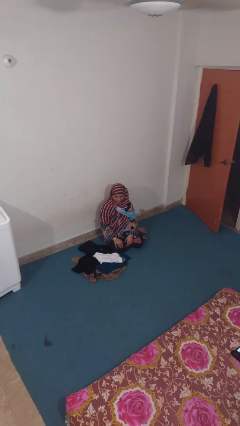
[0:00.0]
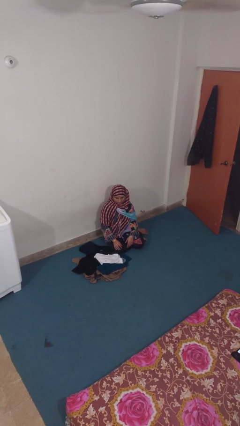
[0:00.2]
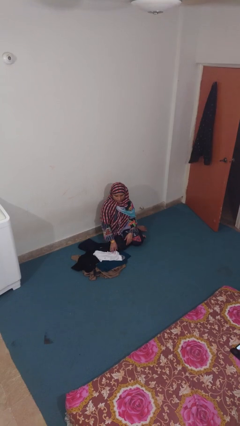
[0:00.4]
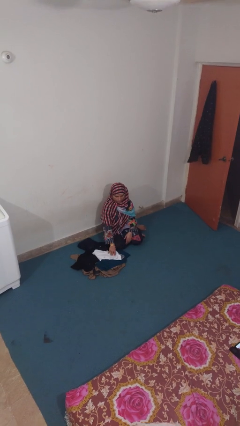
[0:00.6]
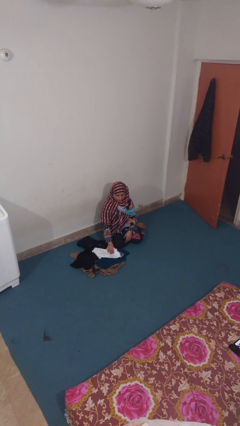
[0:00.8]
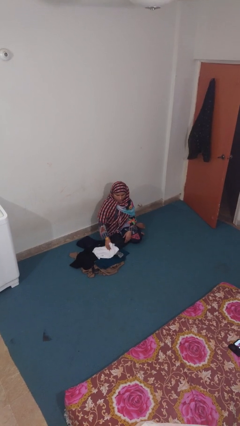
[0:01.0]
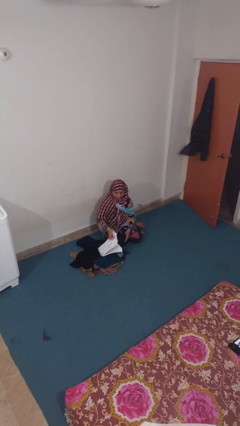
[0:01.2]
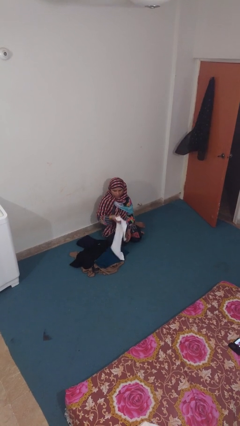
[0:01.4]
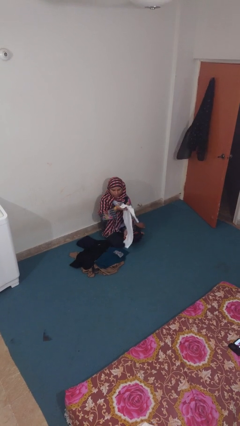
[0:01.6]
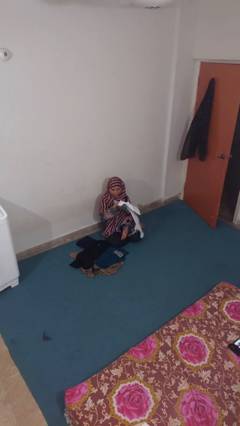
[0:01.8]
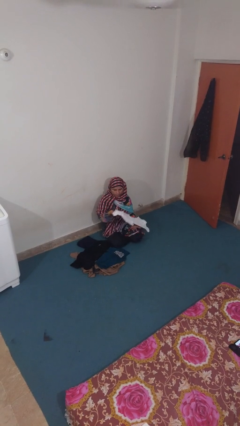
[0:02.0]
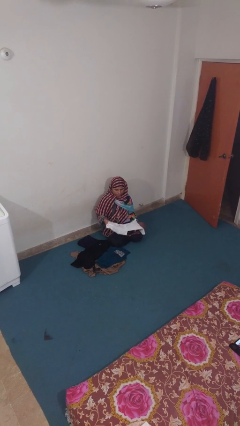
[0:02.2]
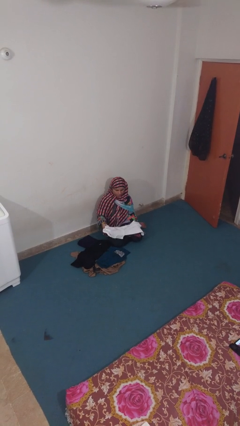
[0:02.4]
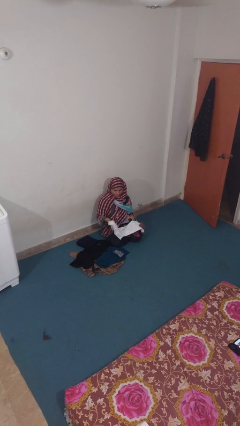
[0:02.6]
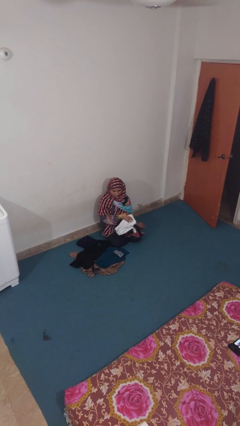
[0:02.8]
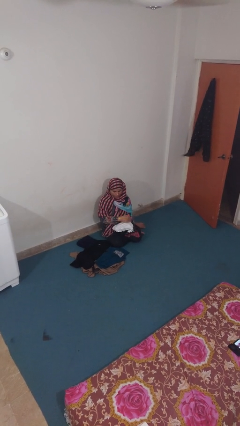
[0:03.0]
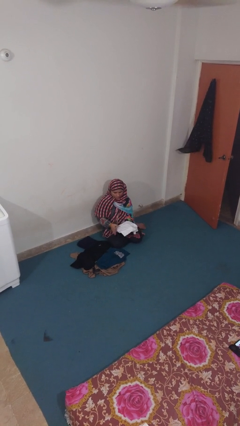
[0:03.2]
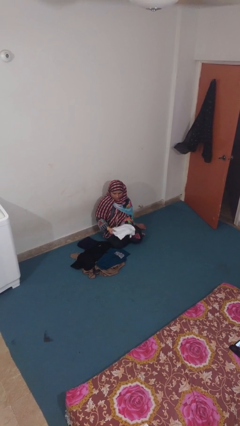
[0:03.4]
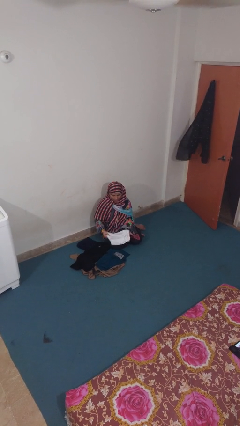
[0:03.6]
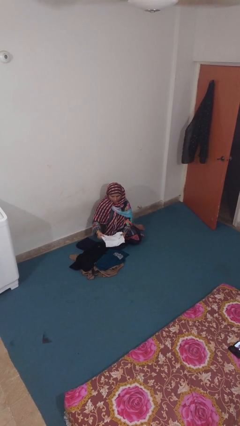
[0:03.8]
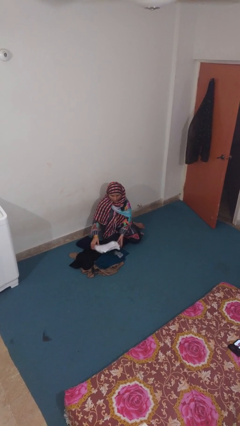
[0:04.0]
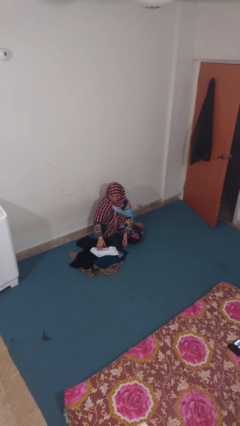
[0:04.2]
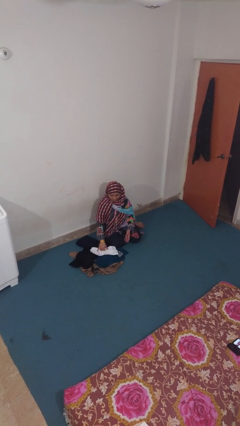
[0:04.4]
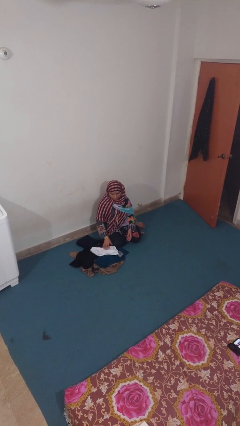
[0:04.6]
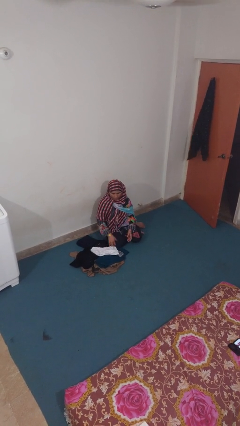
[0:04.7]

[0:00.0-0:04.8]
person folds shirt

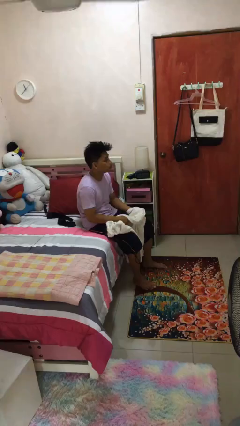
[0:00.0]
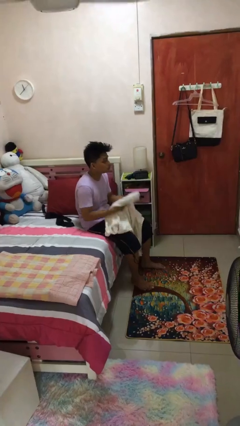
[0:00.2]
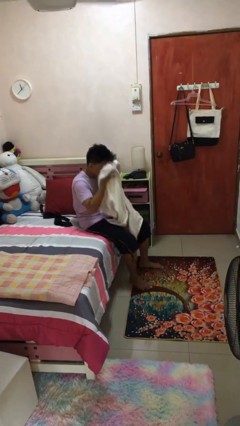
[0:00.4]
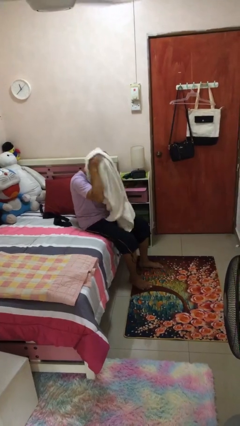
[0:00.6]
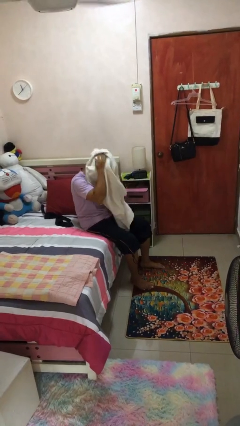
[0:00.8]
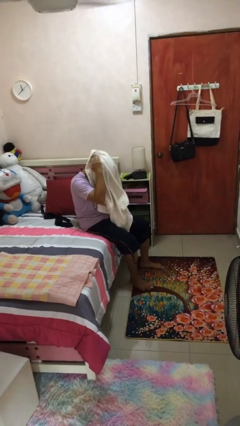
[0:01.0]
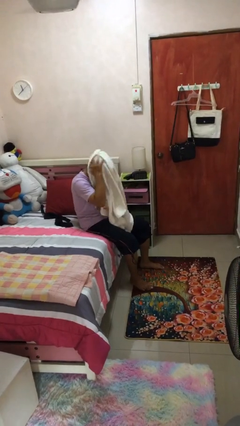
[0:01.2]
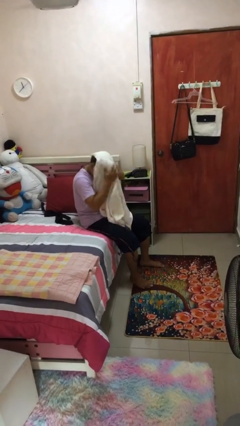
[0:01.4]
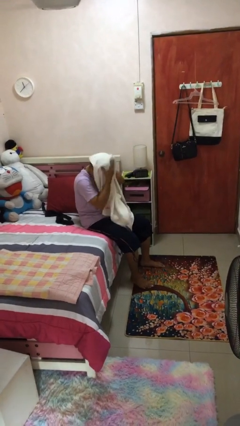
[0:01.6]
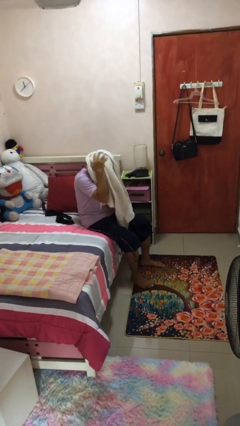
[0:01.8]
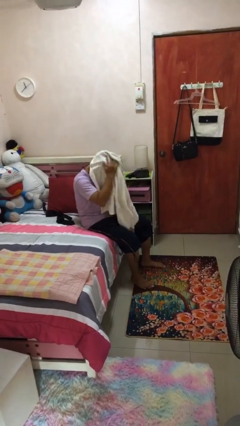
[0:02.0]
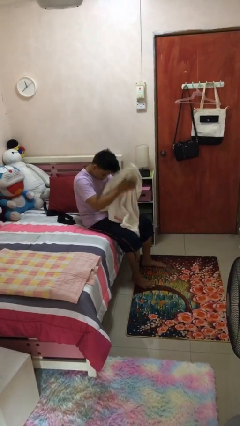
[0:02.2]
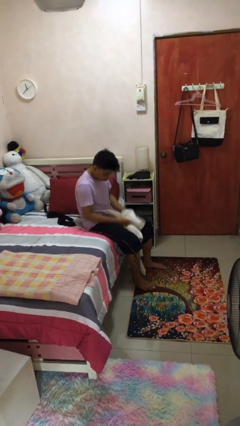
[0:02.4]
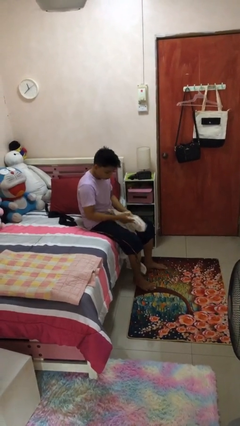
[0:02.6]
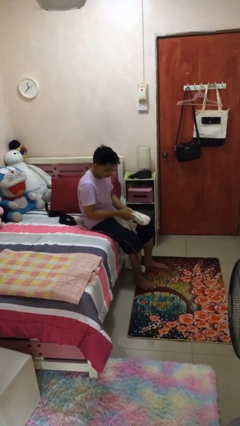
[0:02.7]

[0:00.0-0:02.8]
person dries hair with towel

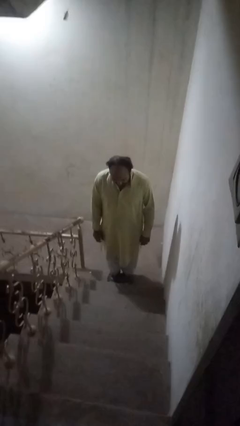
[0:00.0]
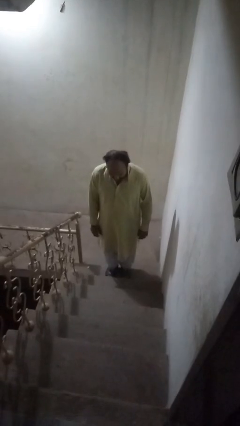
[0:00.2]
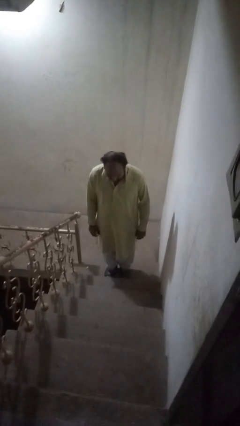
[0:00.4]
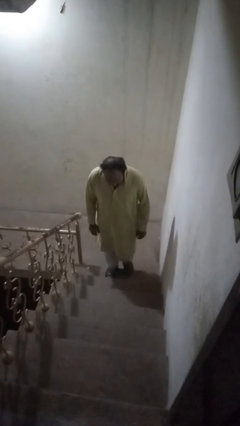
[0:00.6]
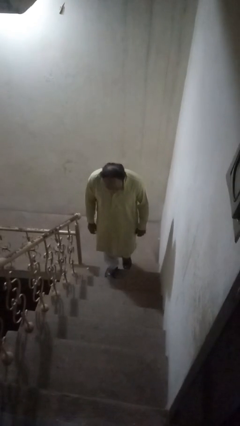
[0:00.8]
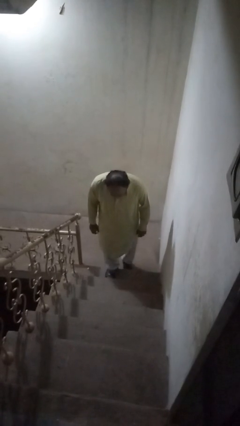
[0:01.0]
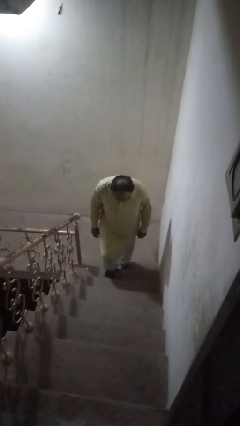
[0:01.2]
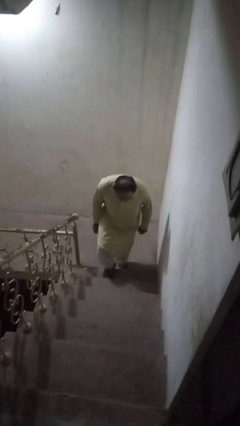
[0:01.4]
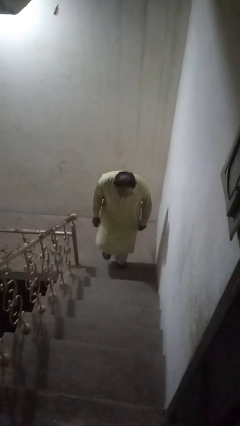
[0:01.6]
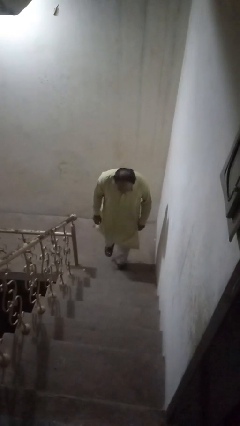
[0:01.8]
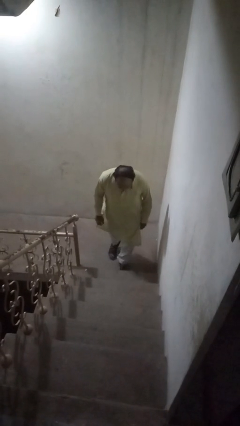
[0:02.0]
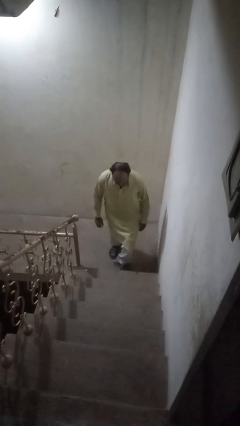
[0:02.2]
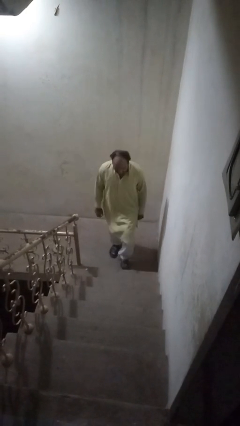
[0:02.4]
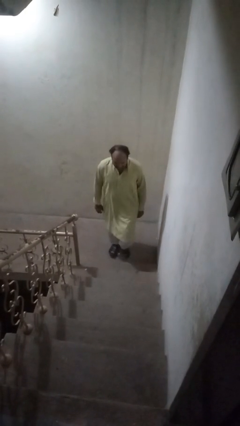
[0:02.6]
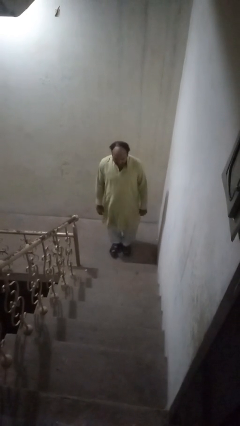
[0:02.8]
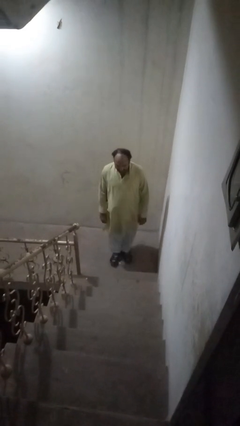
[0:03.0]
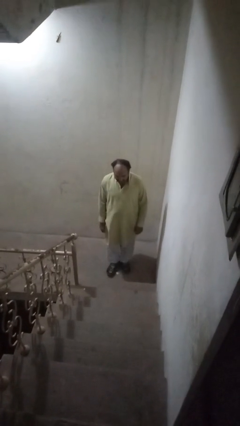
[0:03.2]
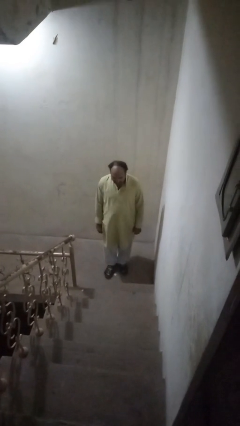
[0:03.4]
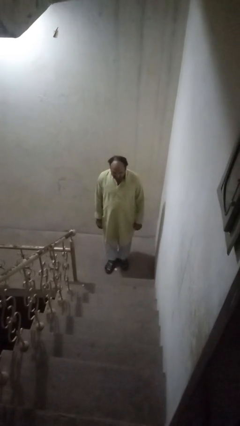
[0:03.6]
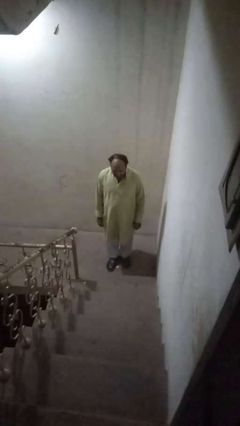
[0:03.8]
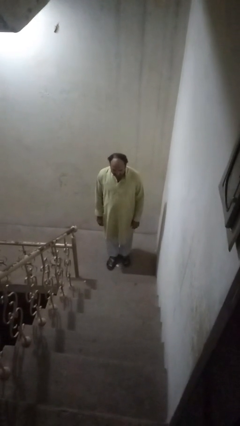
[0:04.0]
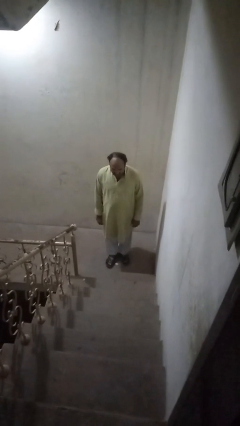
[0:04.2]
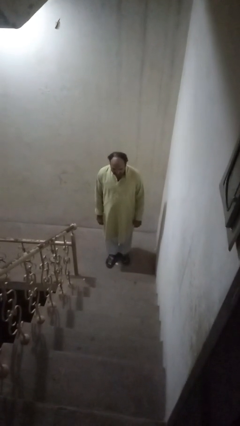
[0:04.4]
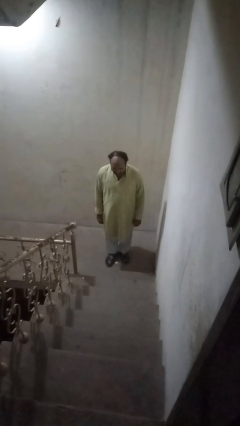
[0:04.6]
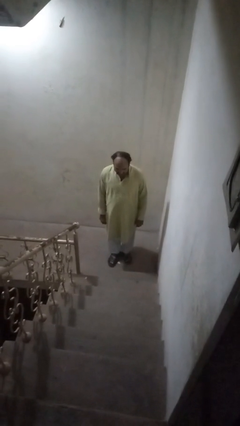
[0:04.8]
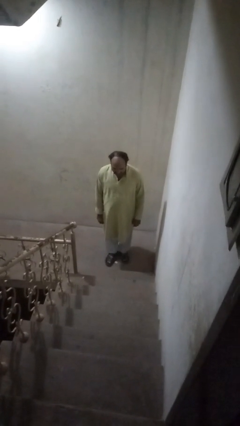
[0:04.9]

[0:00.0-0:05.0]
person climbs down ladder

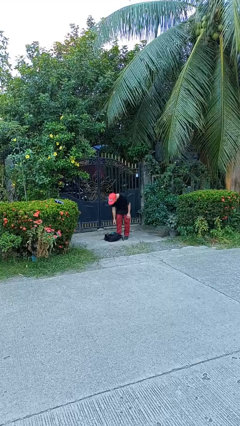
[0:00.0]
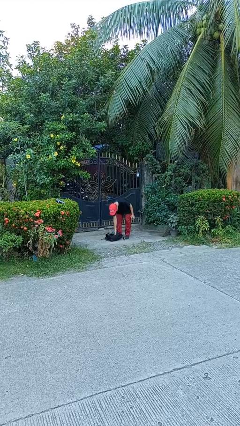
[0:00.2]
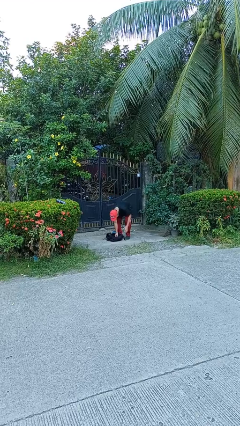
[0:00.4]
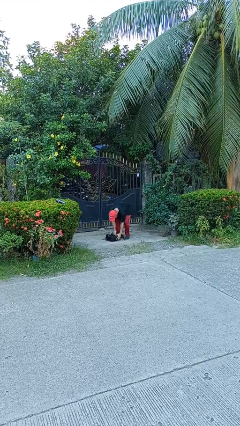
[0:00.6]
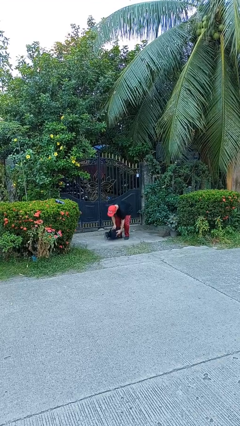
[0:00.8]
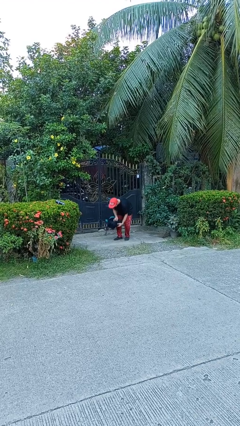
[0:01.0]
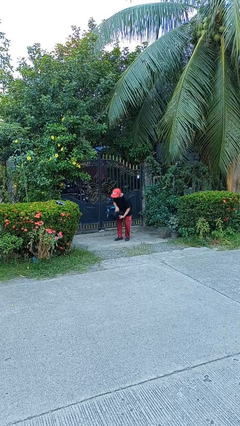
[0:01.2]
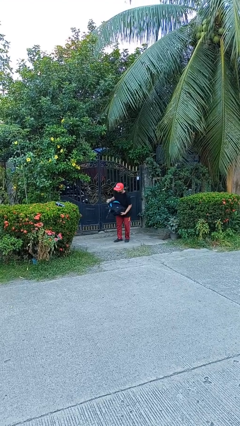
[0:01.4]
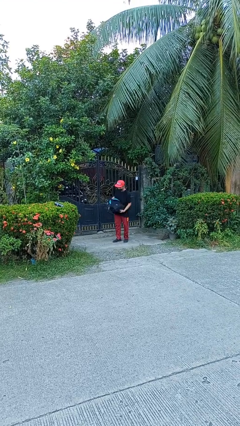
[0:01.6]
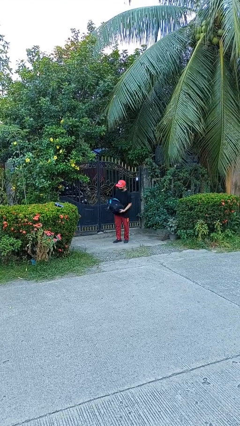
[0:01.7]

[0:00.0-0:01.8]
person picks up object from floor

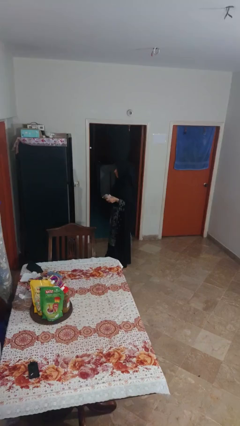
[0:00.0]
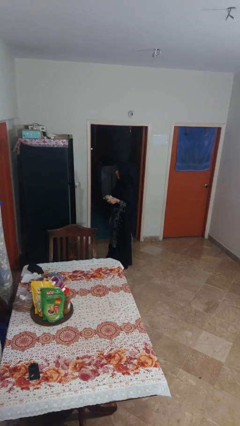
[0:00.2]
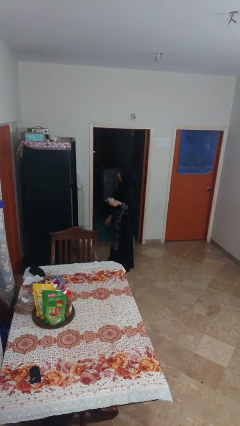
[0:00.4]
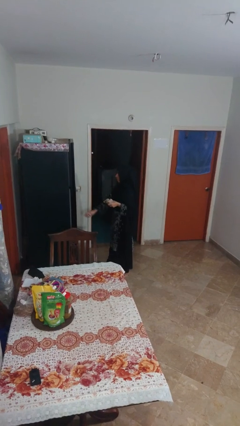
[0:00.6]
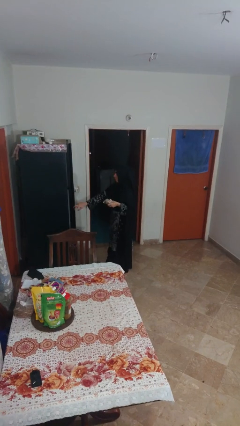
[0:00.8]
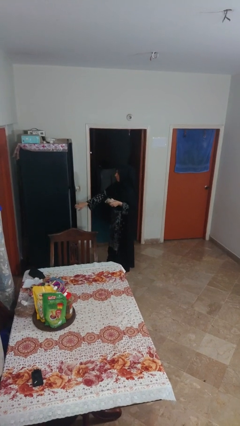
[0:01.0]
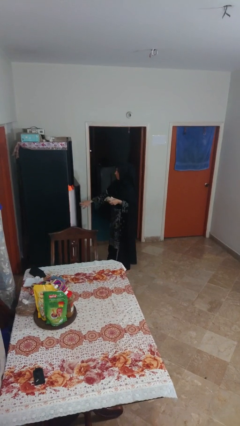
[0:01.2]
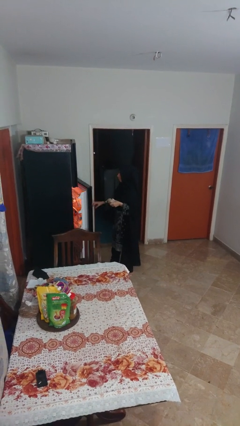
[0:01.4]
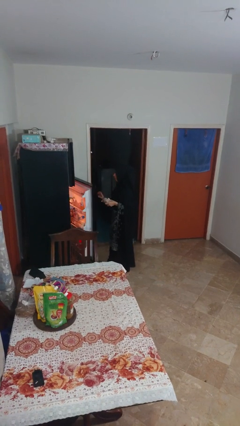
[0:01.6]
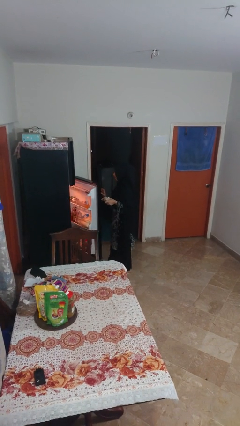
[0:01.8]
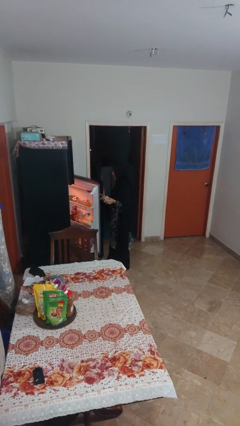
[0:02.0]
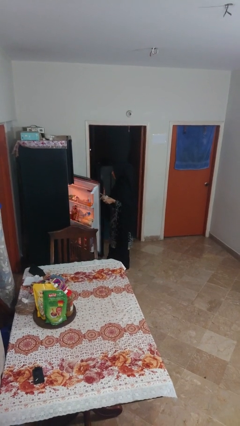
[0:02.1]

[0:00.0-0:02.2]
person opens refrigerator

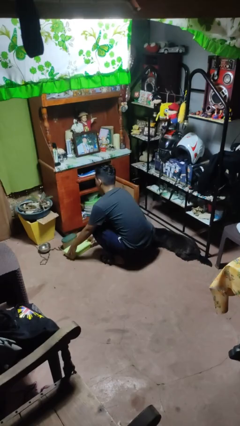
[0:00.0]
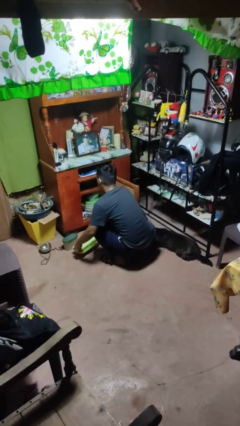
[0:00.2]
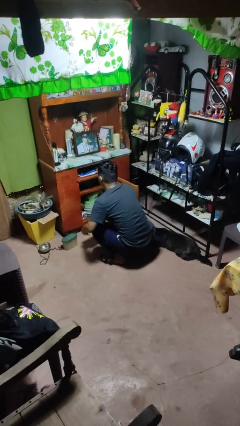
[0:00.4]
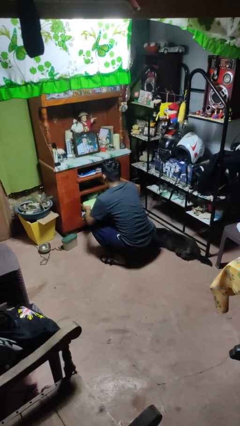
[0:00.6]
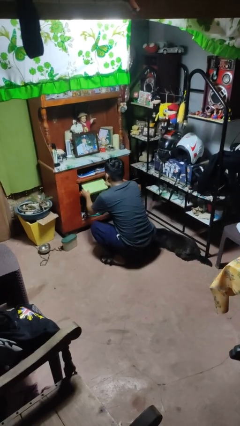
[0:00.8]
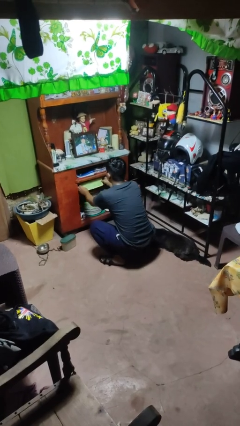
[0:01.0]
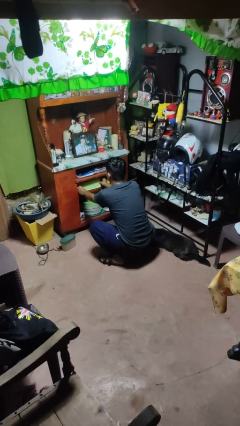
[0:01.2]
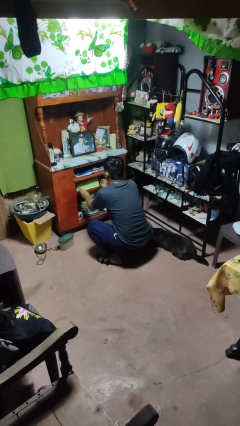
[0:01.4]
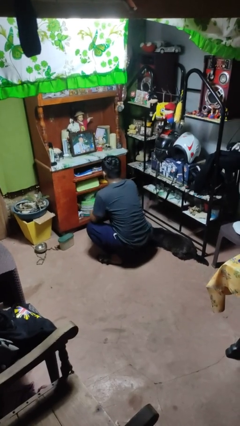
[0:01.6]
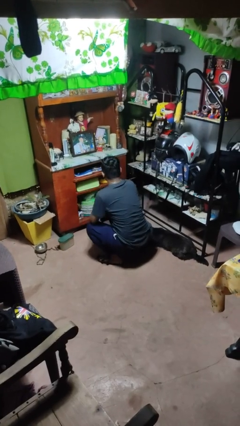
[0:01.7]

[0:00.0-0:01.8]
person puts object in cabinet
